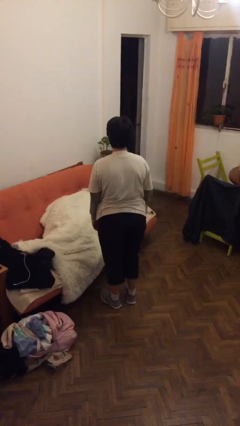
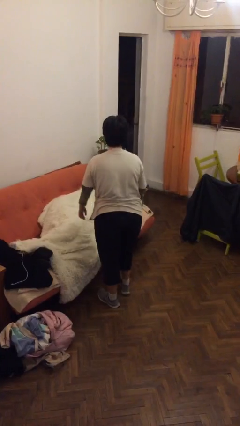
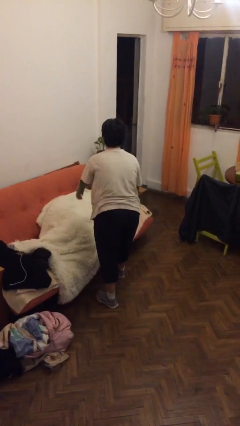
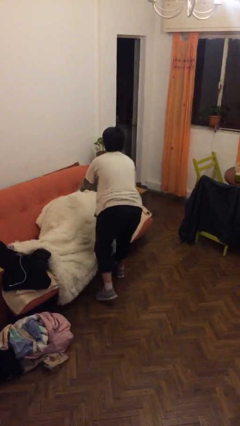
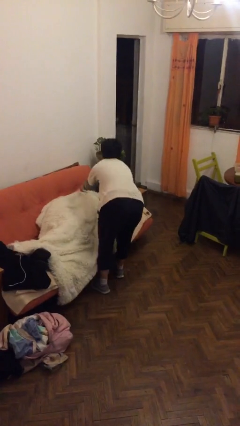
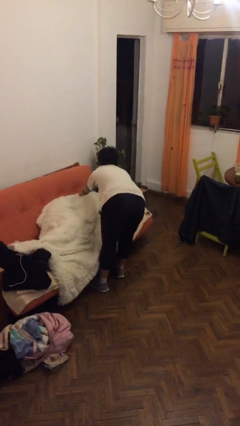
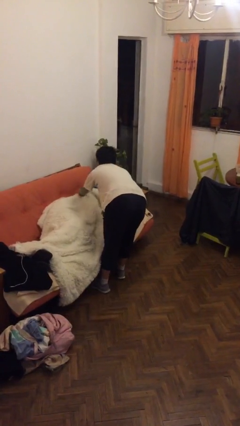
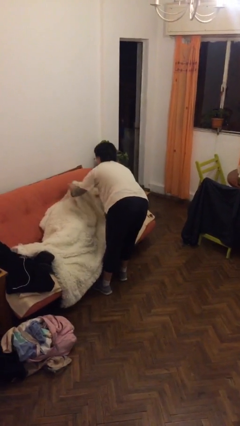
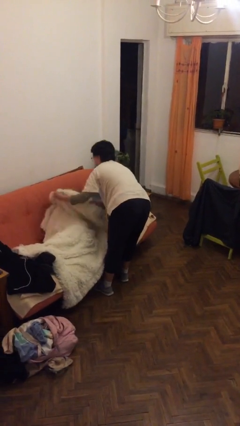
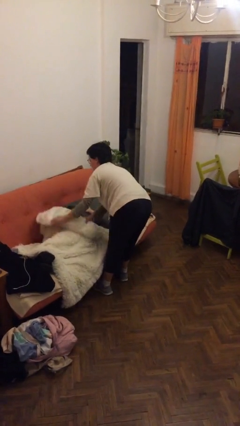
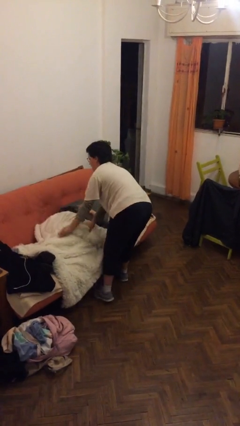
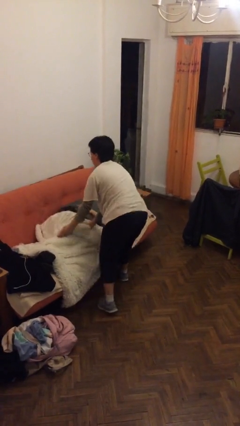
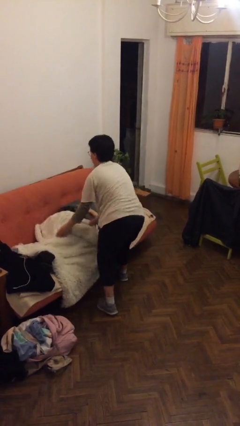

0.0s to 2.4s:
person uncovers friend with blanket

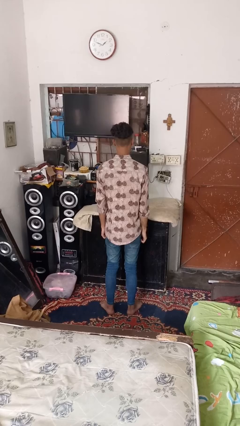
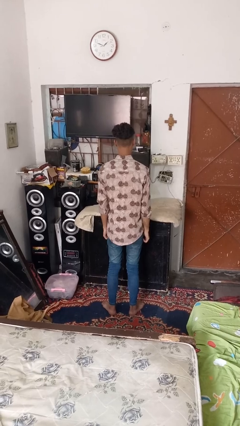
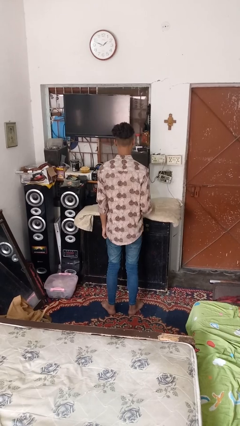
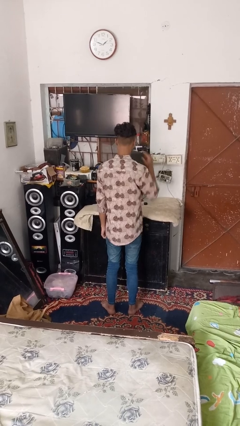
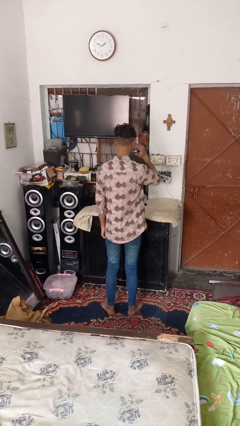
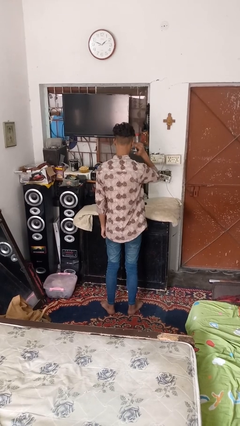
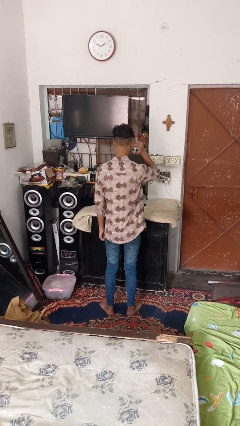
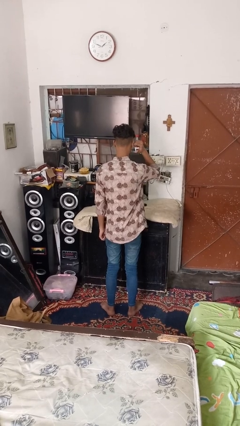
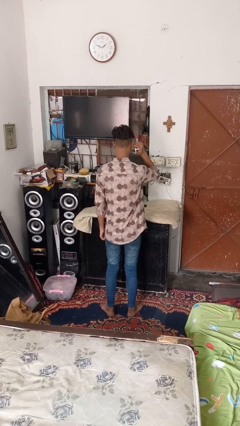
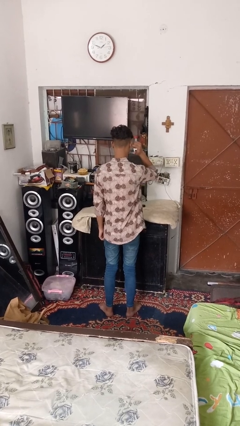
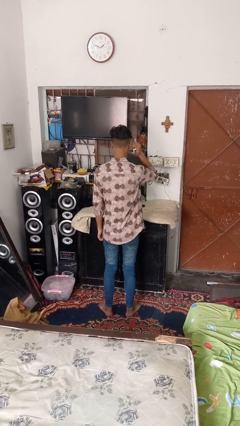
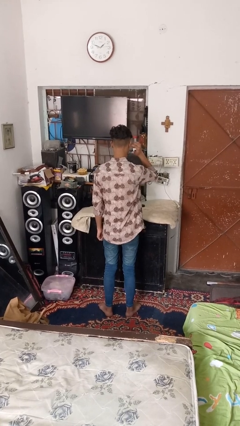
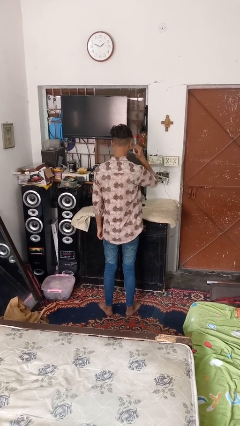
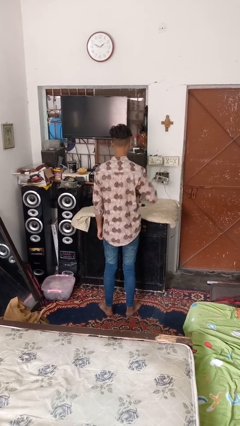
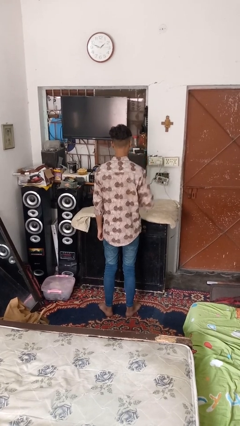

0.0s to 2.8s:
person puts fingers in ear

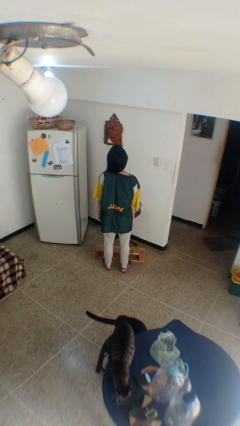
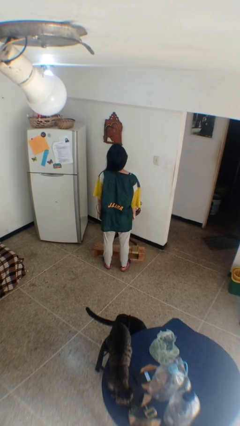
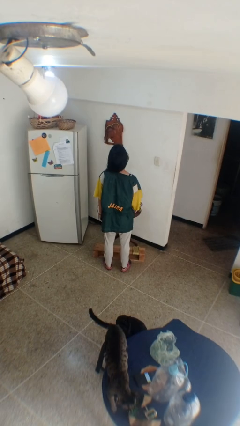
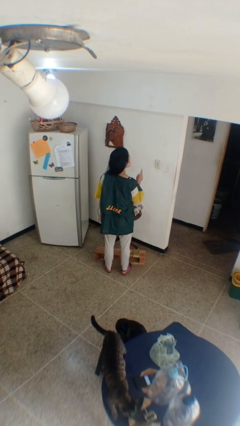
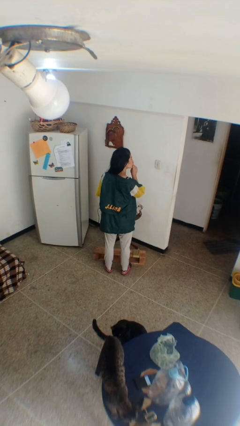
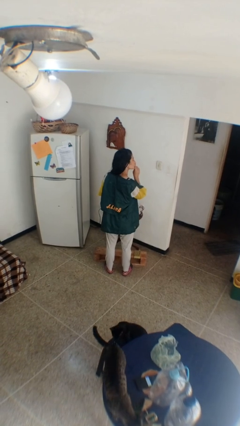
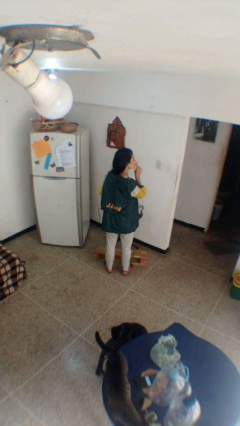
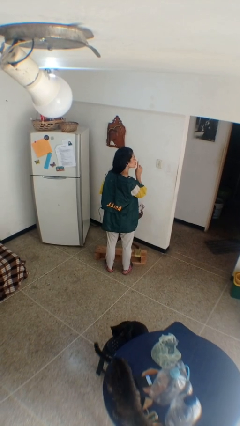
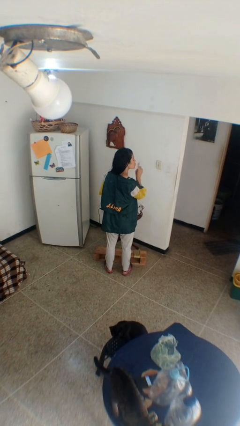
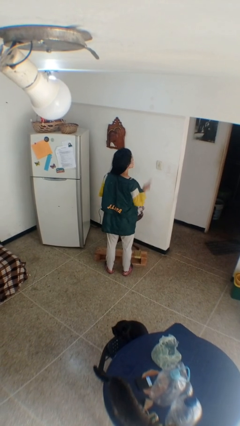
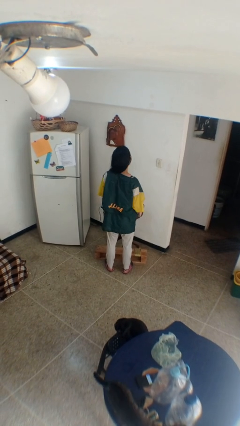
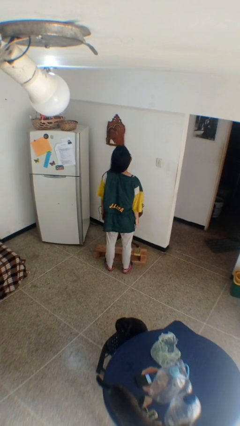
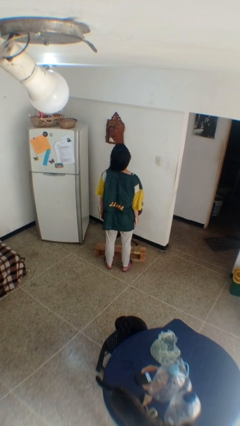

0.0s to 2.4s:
person gestures be quiet

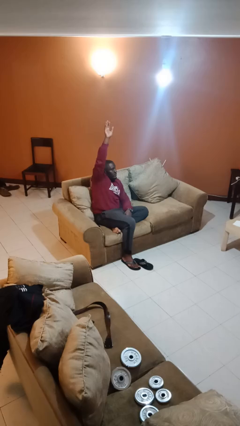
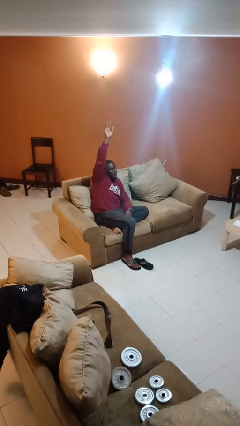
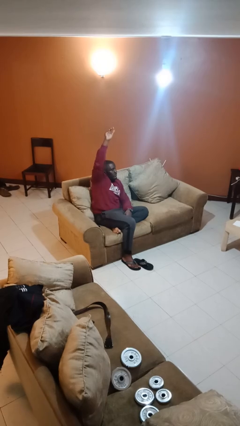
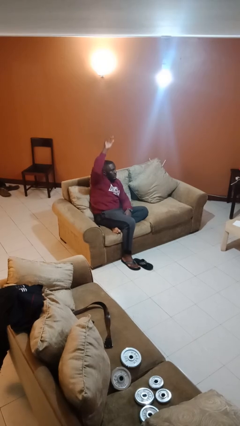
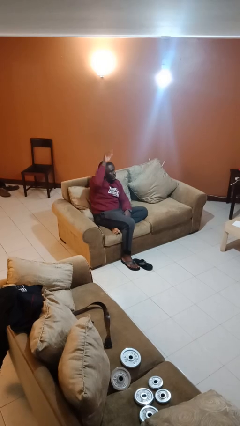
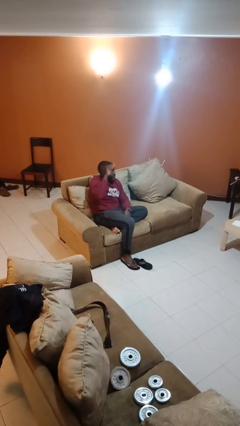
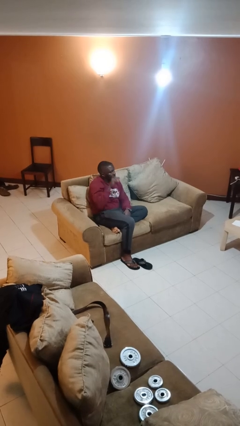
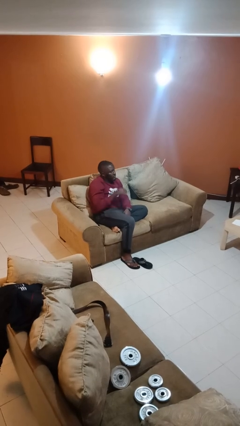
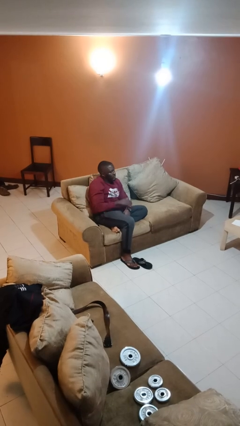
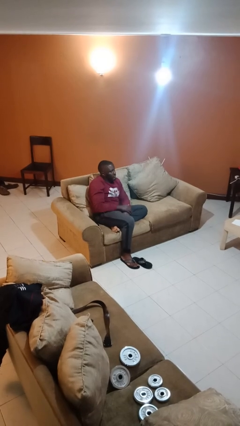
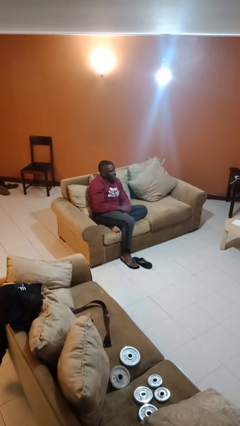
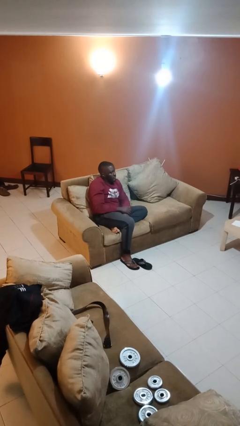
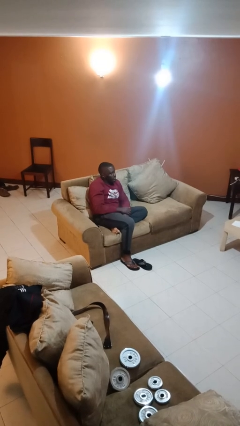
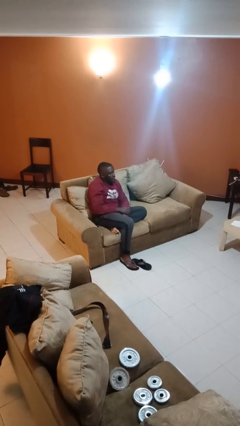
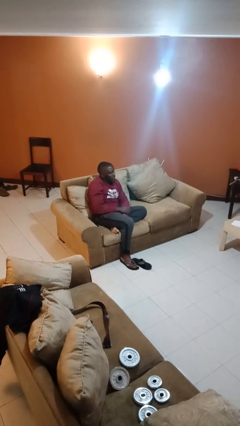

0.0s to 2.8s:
person gestures lower hand

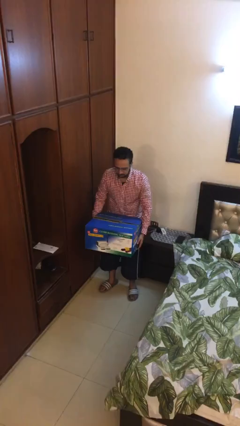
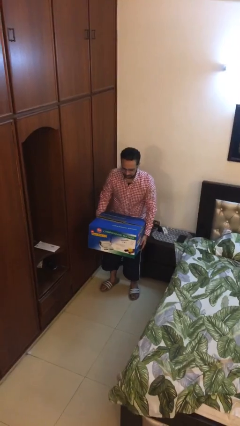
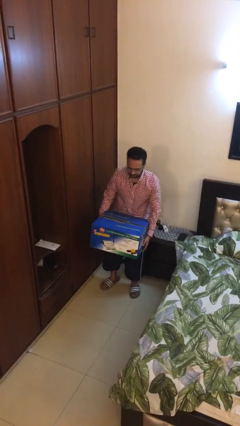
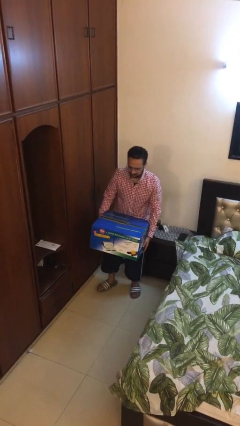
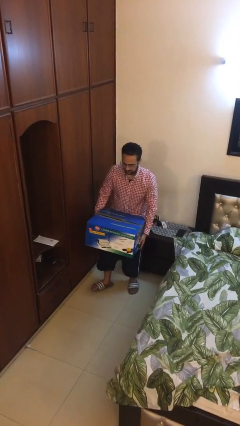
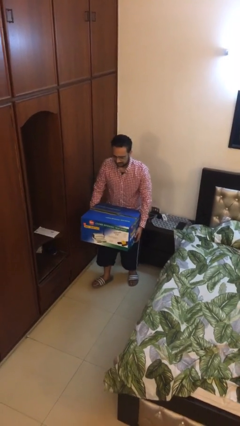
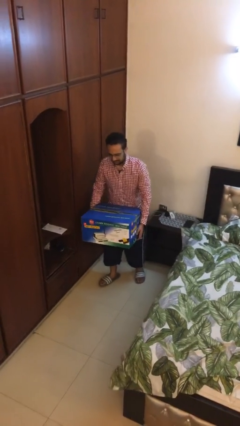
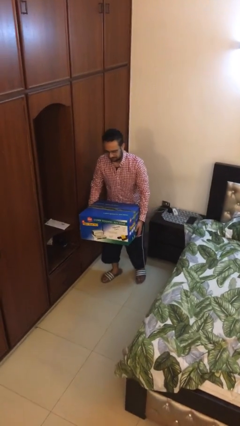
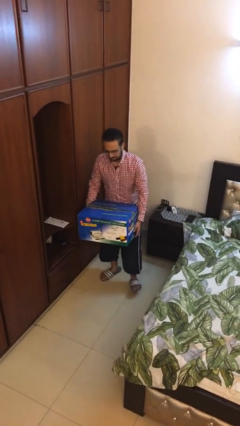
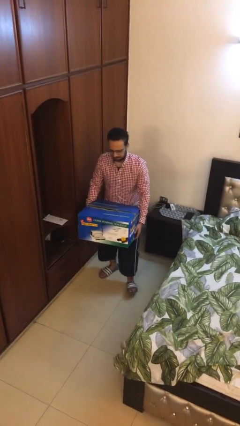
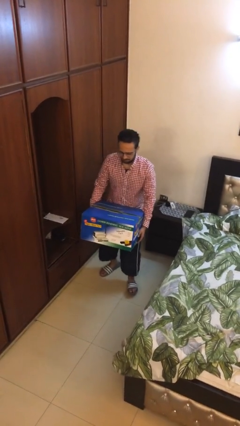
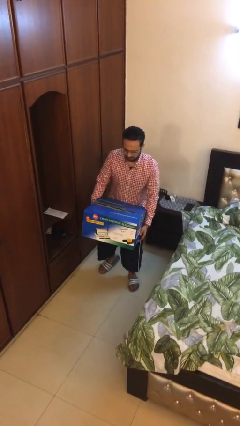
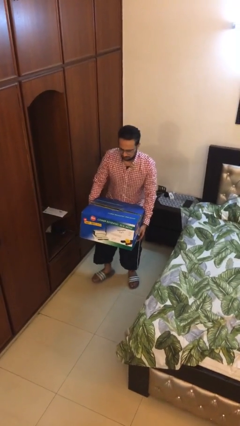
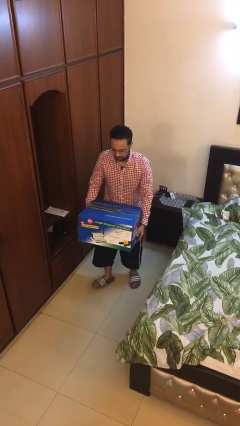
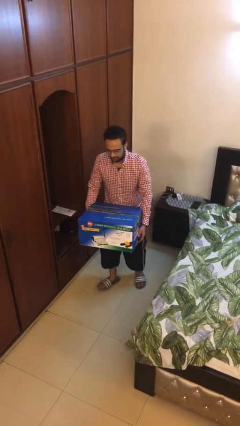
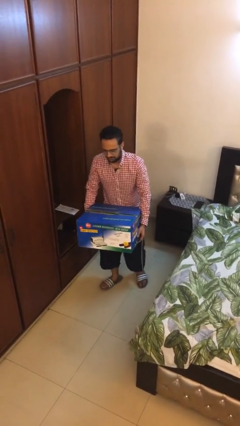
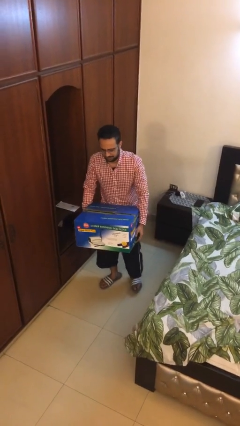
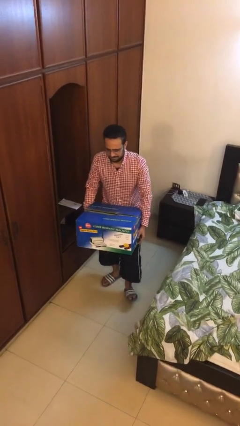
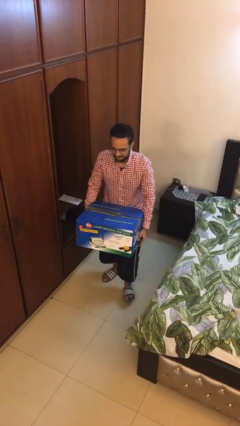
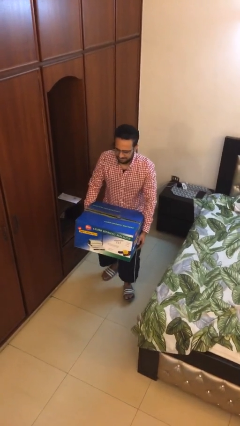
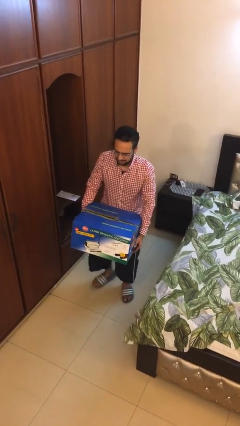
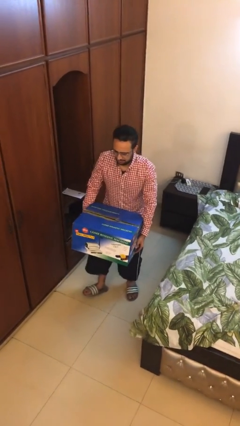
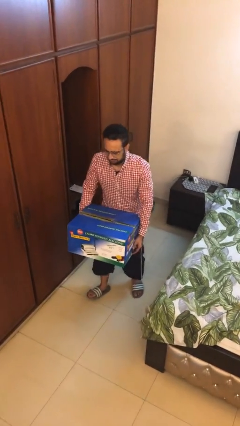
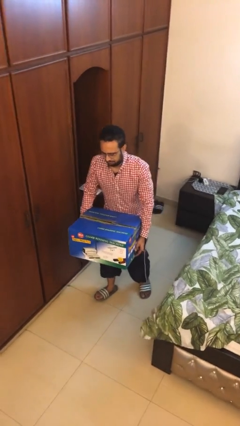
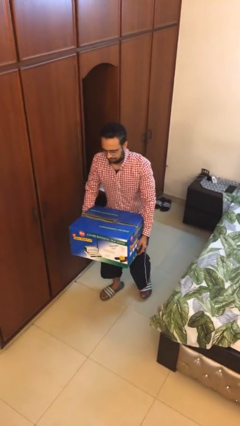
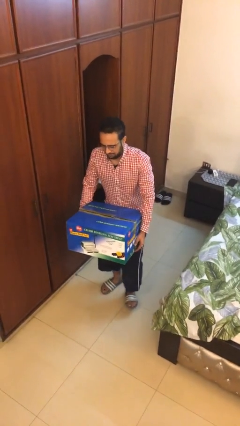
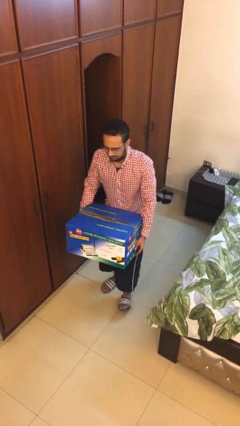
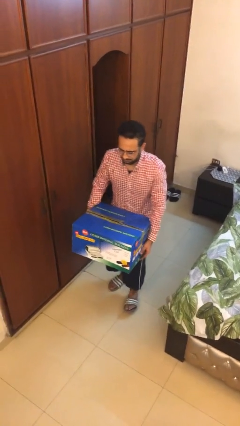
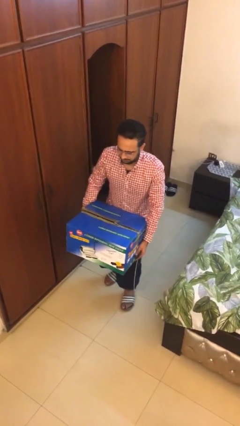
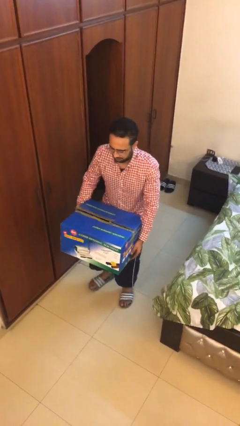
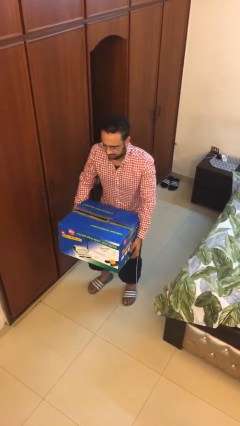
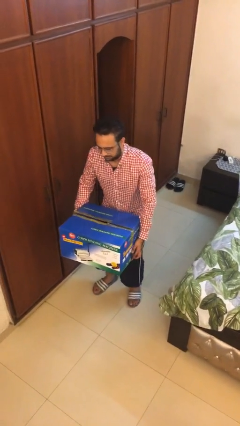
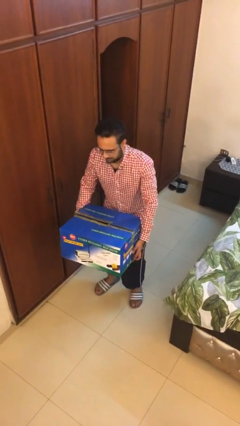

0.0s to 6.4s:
person carries heavy object

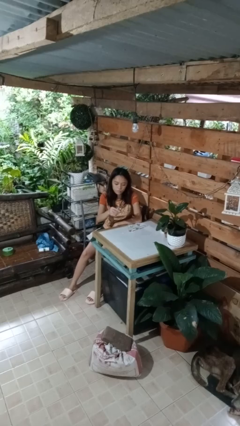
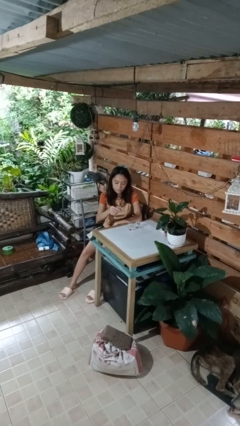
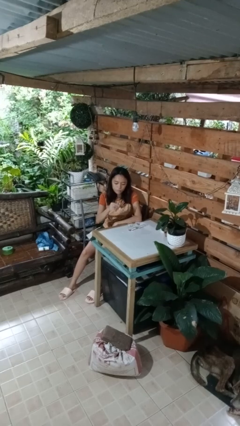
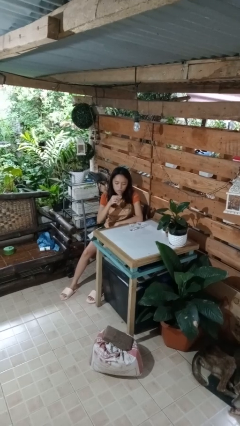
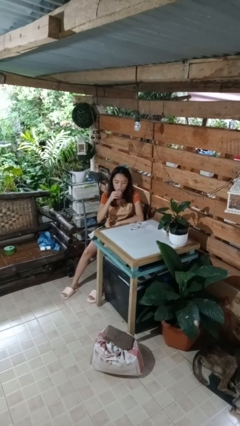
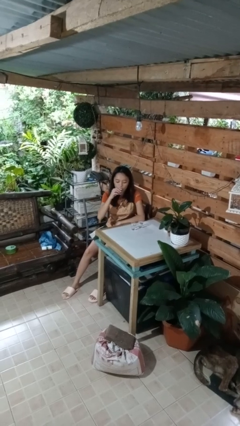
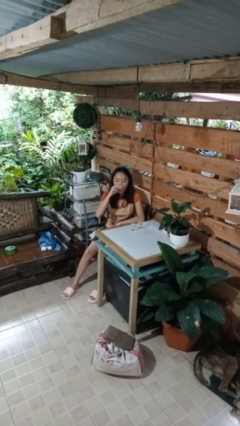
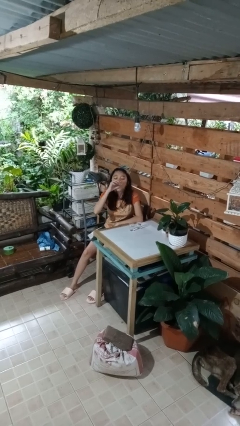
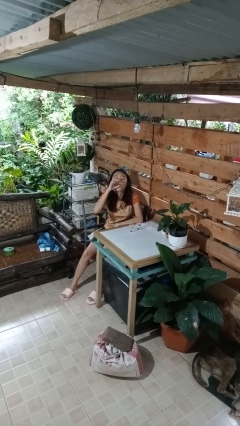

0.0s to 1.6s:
person drinks from shotglass
